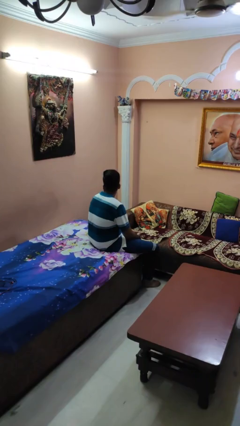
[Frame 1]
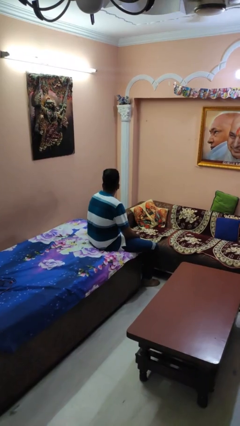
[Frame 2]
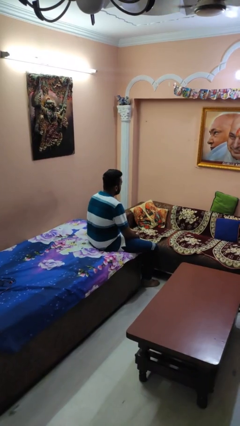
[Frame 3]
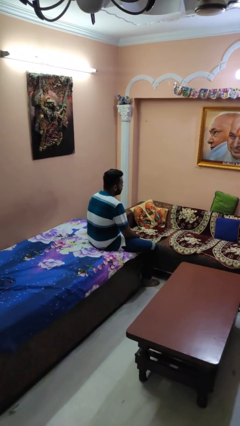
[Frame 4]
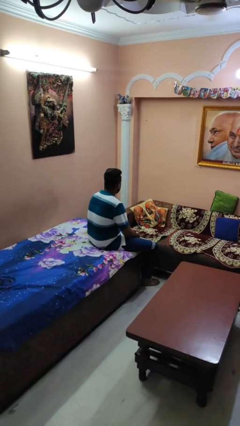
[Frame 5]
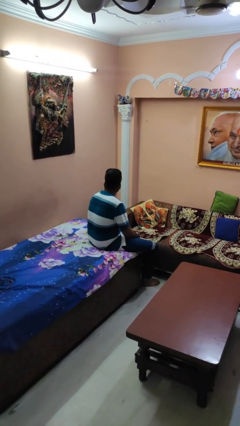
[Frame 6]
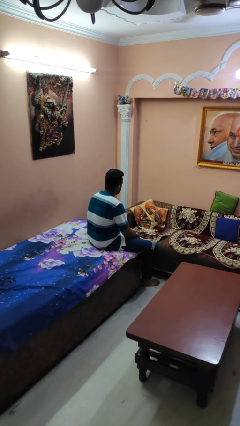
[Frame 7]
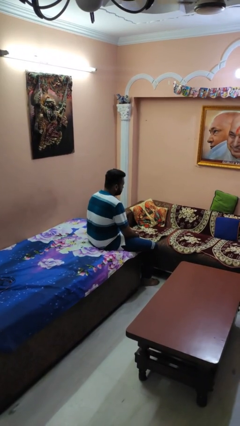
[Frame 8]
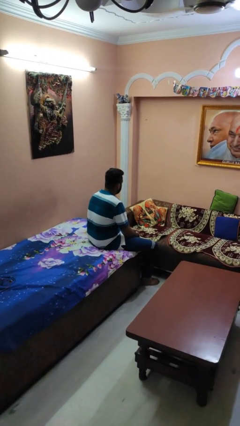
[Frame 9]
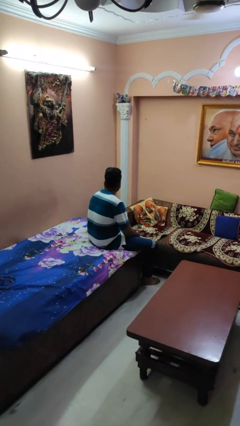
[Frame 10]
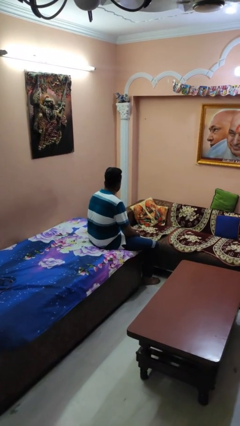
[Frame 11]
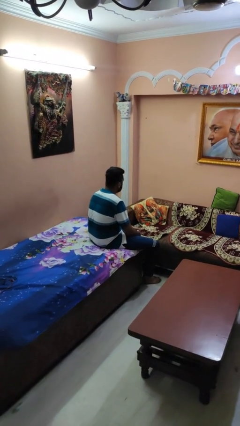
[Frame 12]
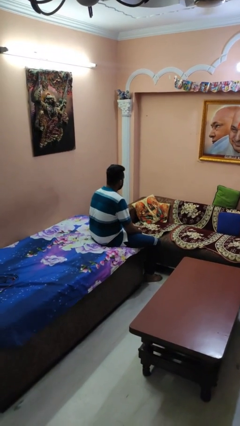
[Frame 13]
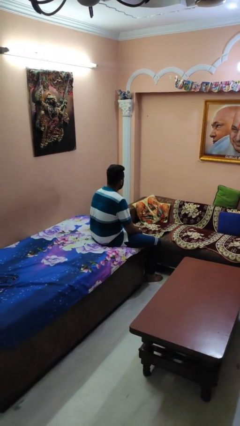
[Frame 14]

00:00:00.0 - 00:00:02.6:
person shakes head

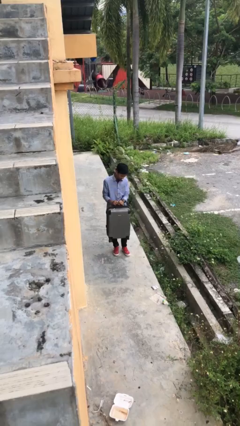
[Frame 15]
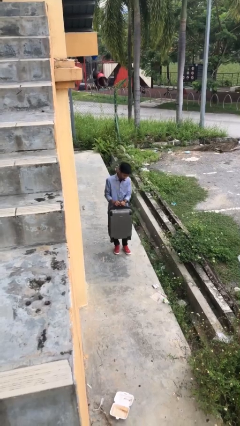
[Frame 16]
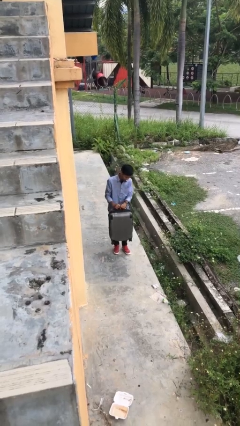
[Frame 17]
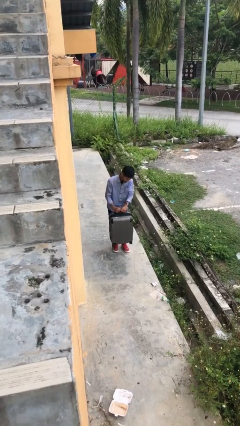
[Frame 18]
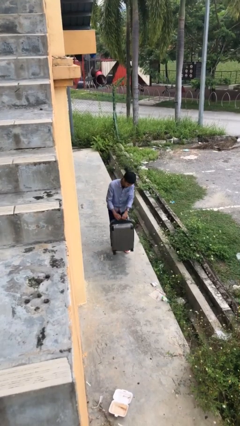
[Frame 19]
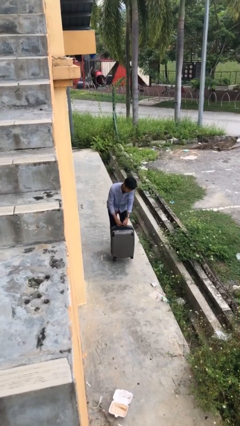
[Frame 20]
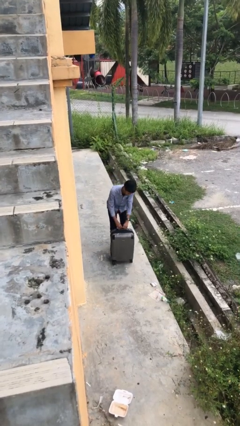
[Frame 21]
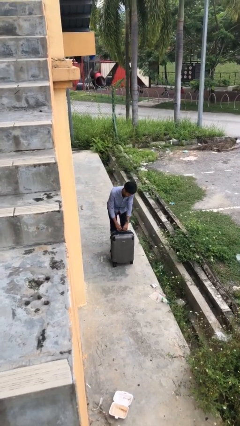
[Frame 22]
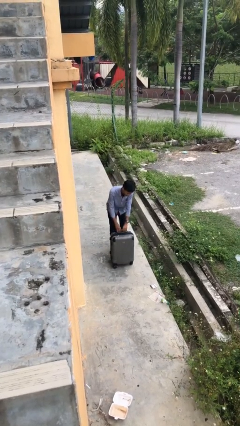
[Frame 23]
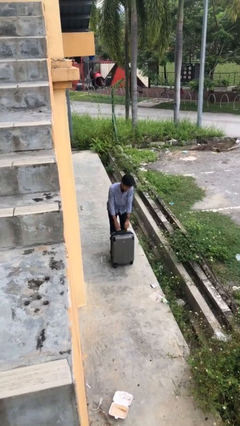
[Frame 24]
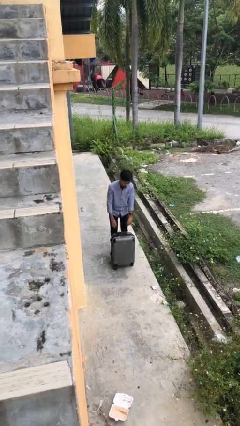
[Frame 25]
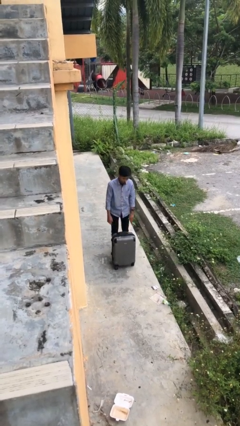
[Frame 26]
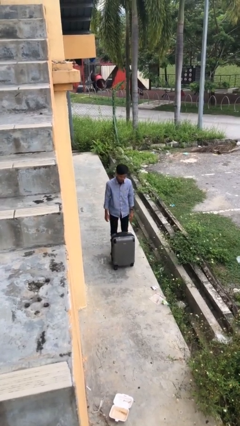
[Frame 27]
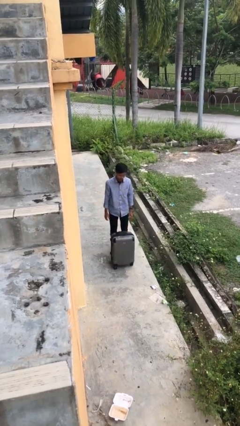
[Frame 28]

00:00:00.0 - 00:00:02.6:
person puts down object on floor

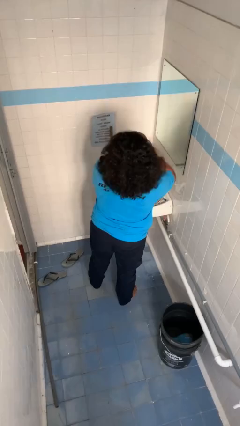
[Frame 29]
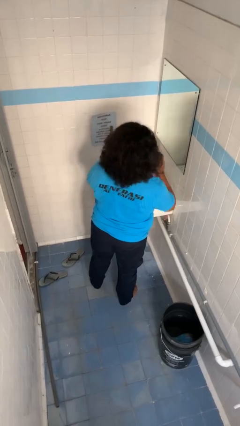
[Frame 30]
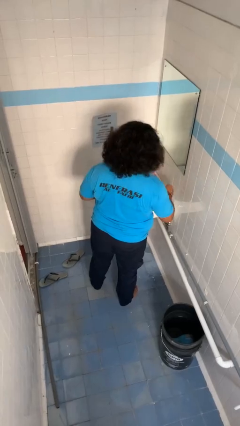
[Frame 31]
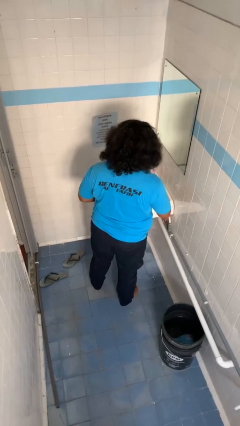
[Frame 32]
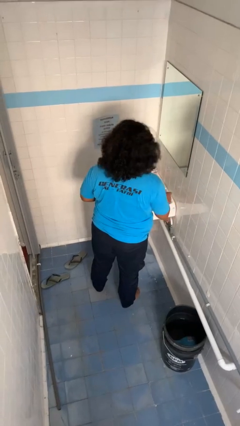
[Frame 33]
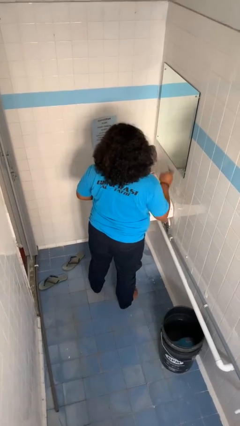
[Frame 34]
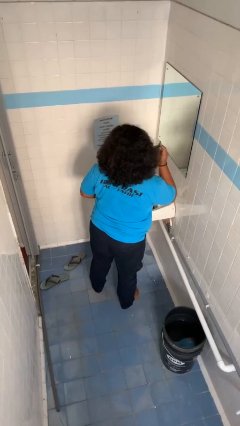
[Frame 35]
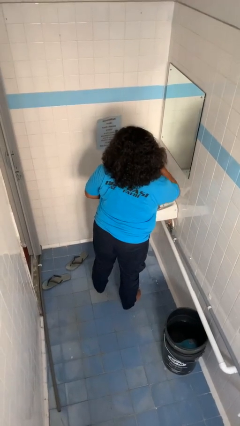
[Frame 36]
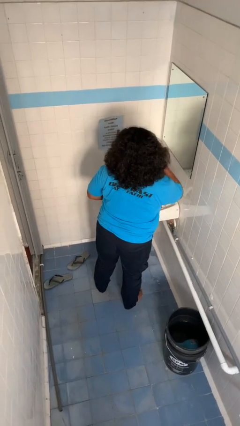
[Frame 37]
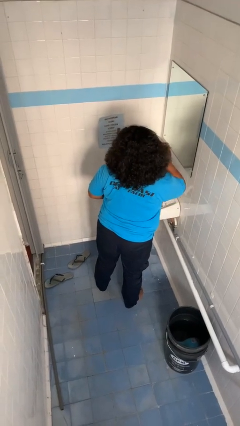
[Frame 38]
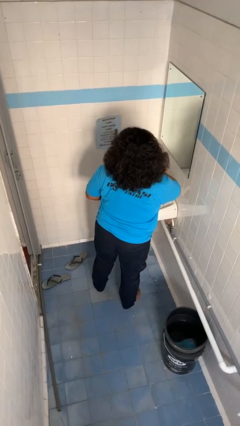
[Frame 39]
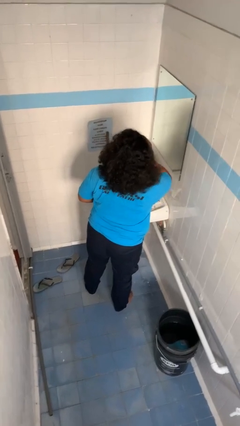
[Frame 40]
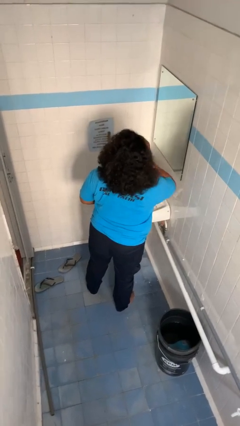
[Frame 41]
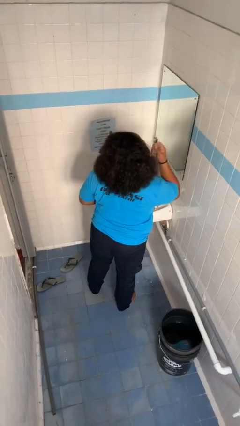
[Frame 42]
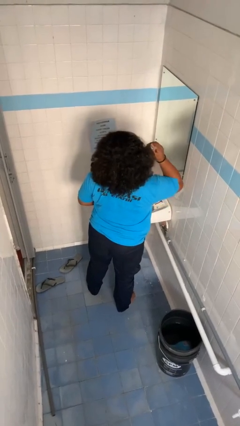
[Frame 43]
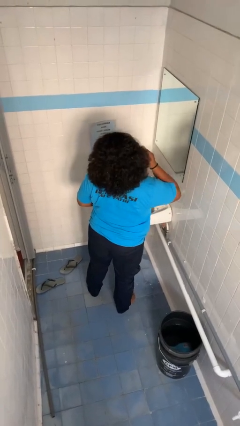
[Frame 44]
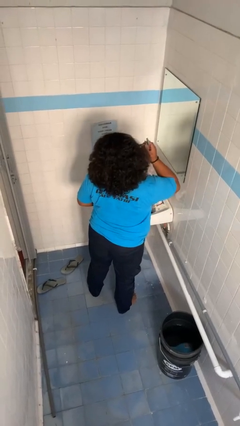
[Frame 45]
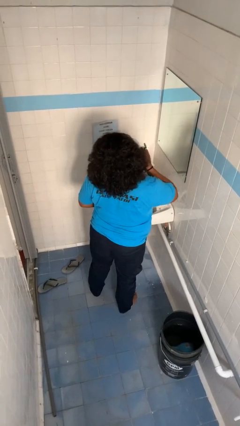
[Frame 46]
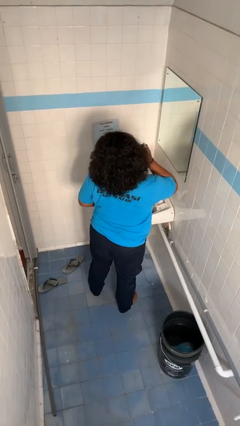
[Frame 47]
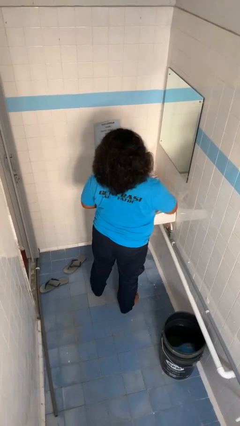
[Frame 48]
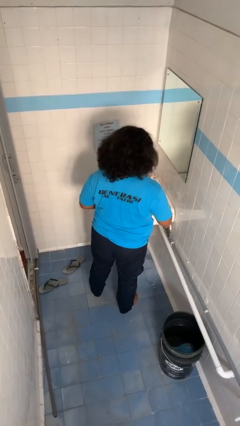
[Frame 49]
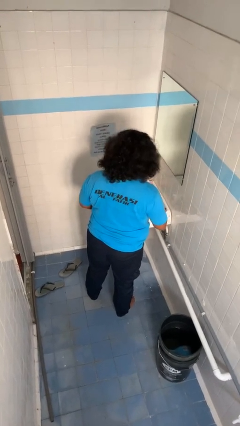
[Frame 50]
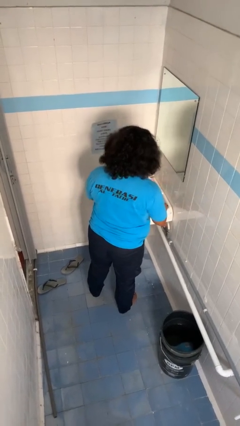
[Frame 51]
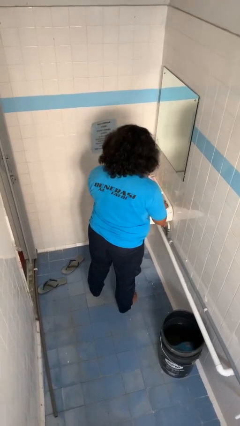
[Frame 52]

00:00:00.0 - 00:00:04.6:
person shaves face

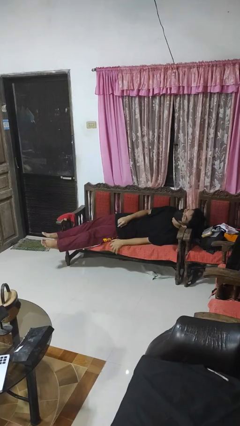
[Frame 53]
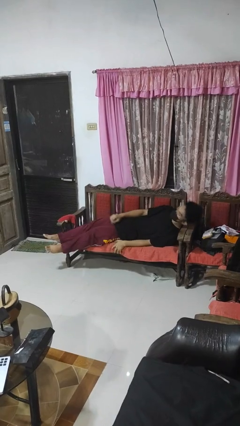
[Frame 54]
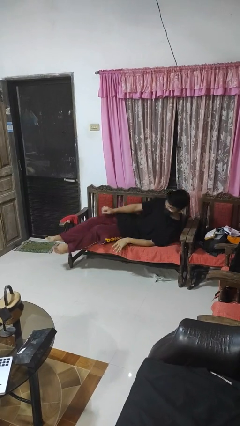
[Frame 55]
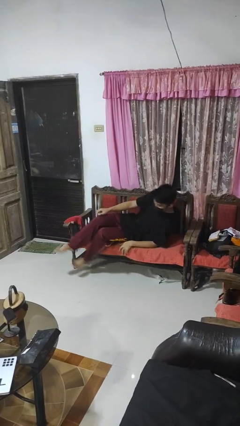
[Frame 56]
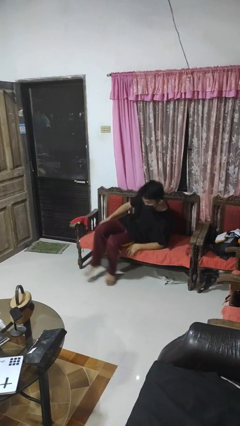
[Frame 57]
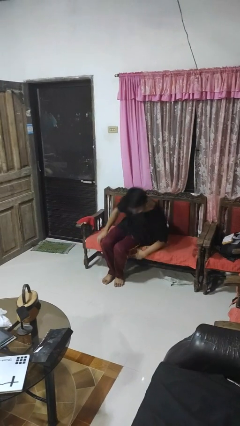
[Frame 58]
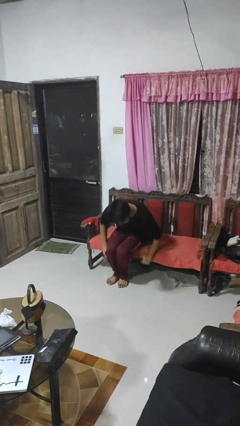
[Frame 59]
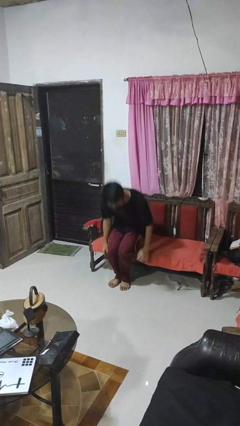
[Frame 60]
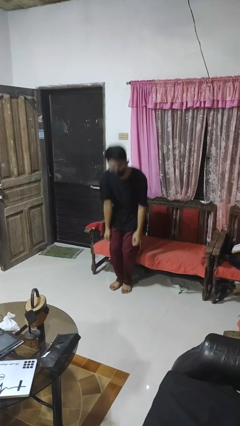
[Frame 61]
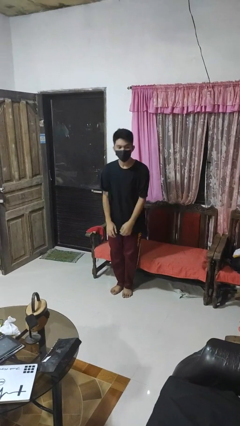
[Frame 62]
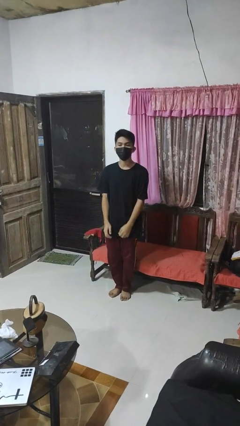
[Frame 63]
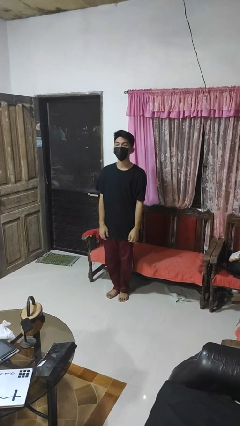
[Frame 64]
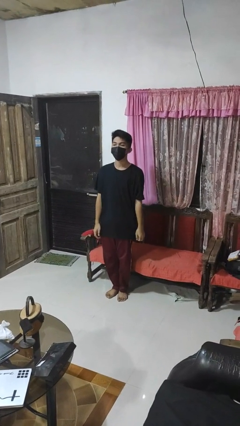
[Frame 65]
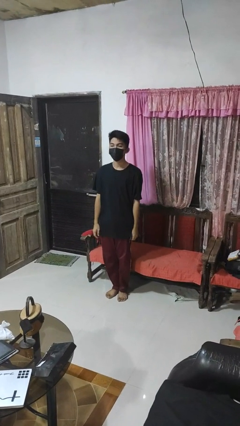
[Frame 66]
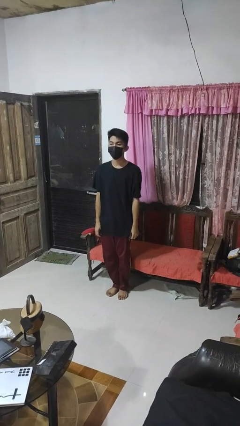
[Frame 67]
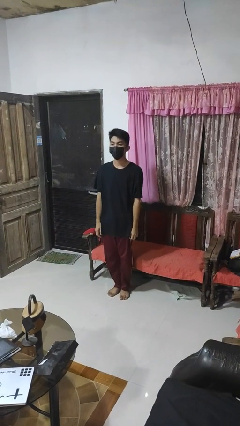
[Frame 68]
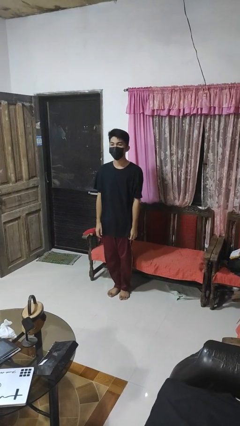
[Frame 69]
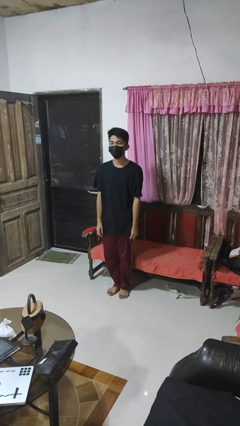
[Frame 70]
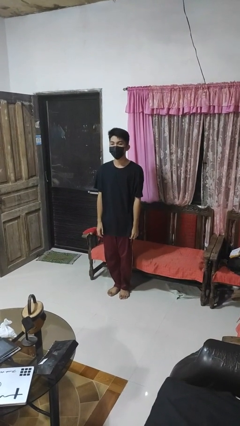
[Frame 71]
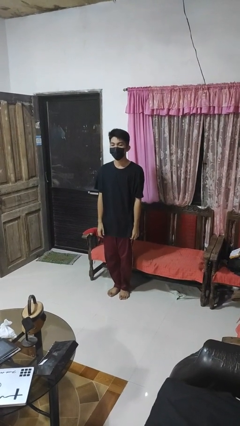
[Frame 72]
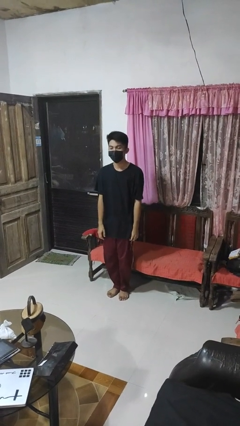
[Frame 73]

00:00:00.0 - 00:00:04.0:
person stands up

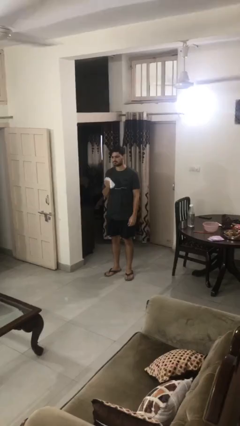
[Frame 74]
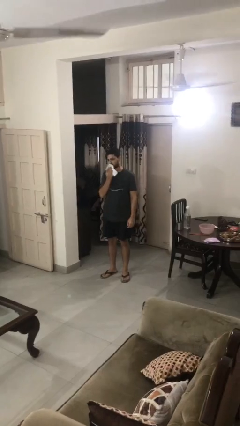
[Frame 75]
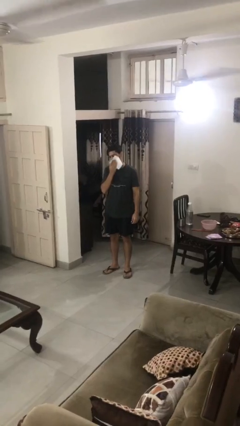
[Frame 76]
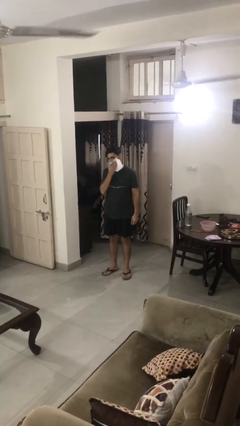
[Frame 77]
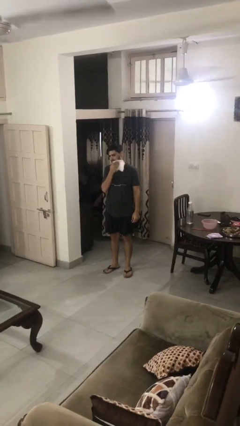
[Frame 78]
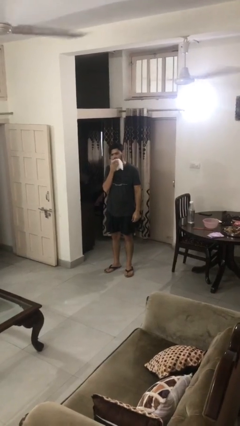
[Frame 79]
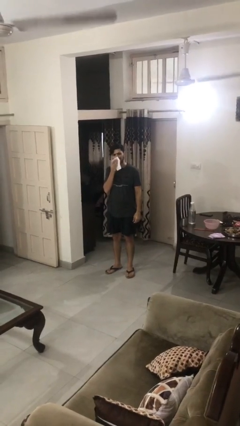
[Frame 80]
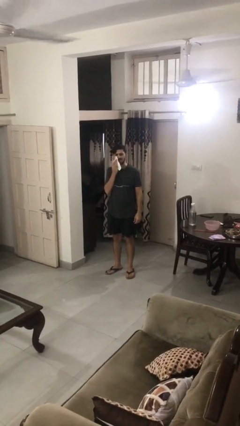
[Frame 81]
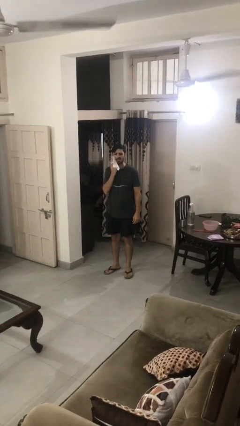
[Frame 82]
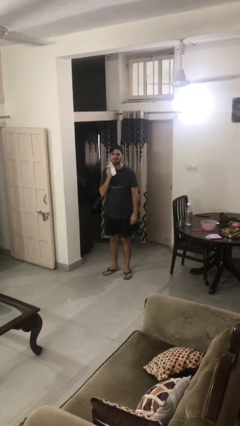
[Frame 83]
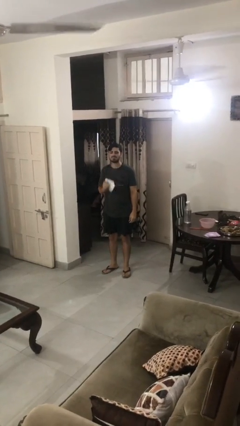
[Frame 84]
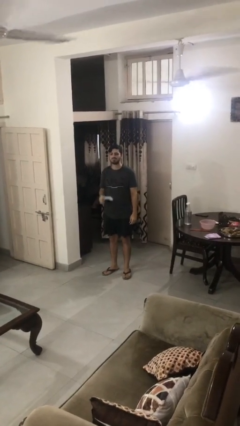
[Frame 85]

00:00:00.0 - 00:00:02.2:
person wipes mouth with napkin

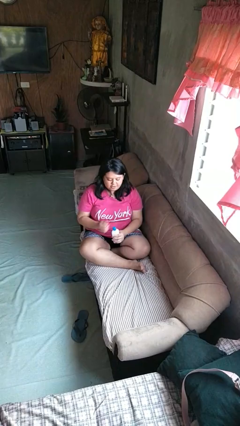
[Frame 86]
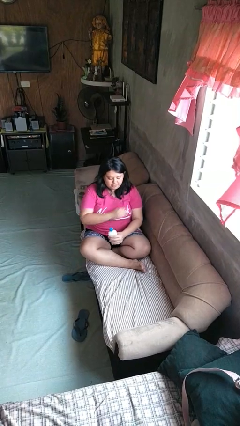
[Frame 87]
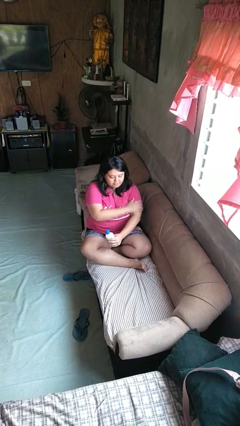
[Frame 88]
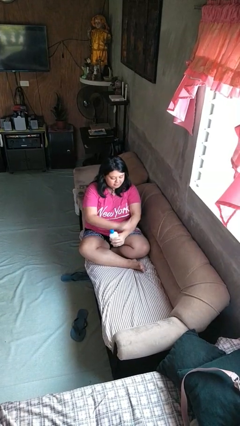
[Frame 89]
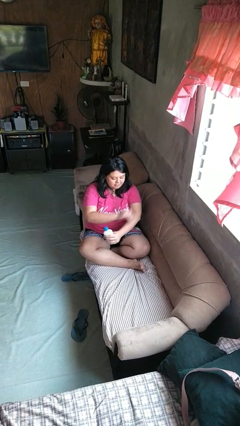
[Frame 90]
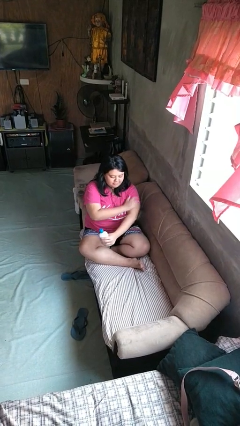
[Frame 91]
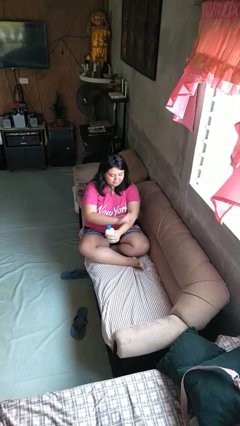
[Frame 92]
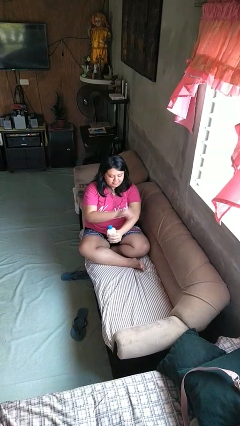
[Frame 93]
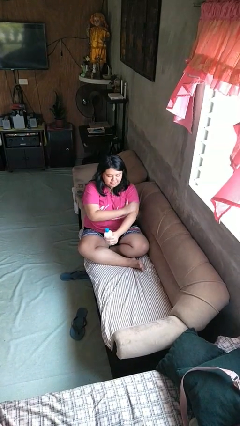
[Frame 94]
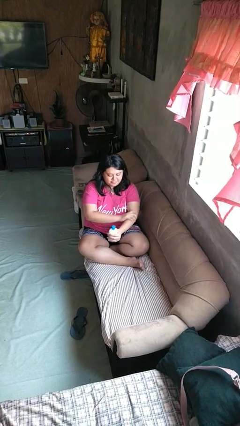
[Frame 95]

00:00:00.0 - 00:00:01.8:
person applies sunscreen
